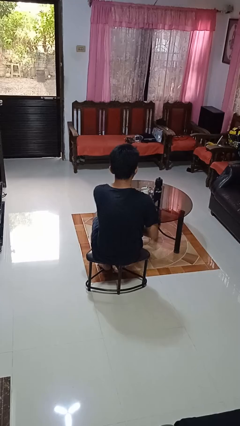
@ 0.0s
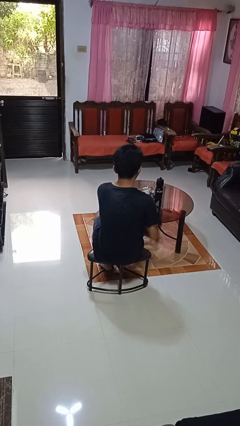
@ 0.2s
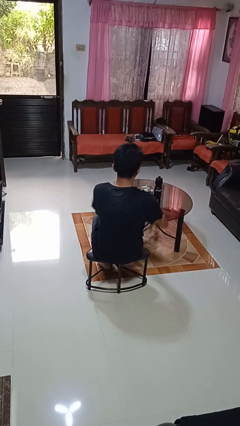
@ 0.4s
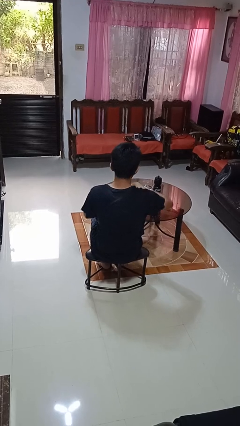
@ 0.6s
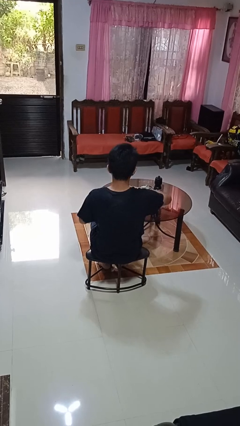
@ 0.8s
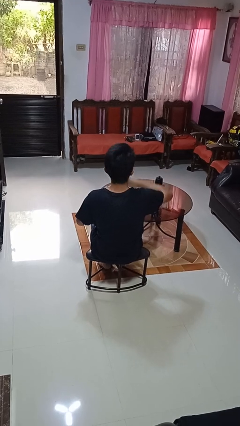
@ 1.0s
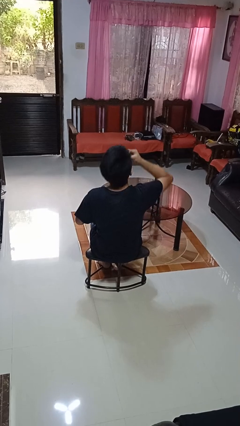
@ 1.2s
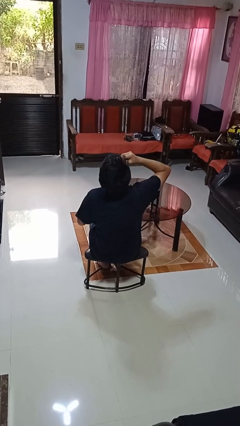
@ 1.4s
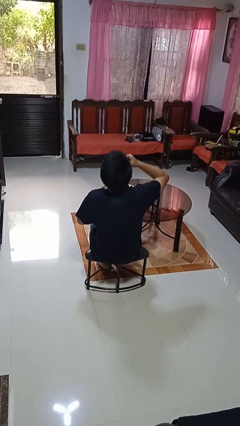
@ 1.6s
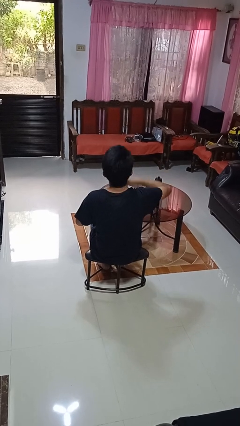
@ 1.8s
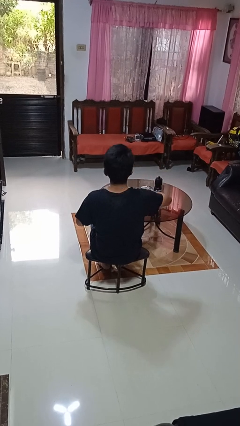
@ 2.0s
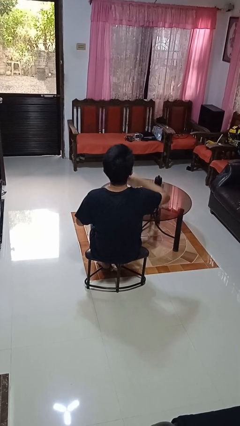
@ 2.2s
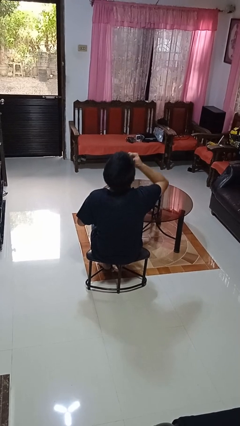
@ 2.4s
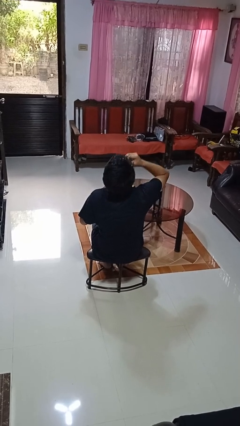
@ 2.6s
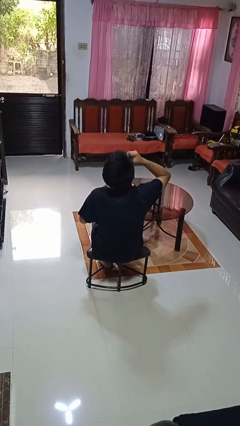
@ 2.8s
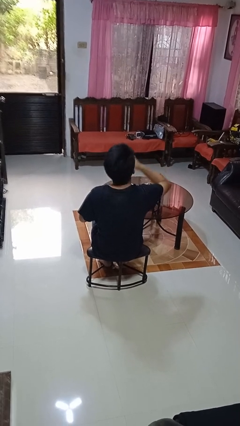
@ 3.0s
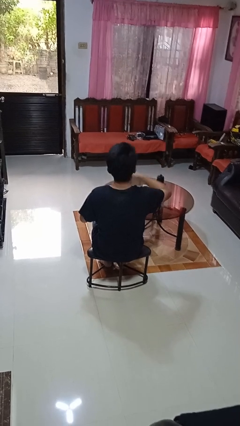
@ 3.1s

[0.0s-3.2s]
person eats with hands

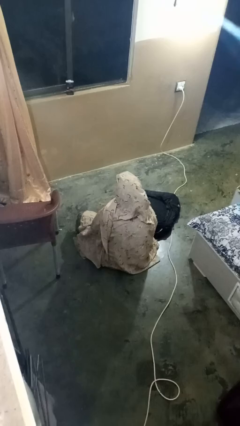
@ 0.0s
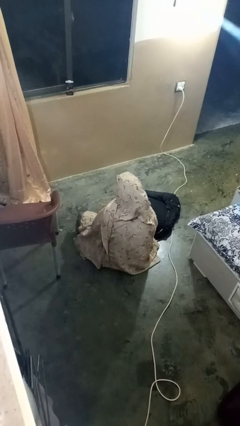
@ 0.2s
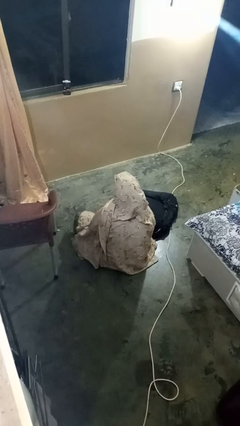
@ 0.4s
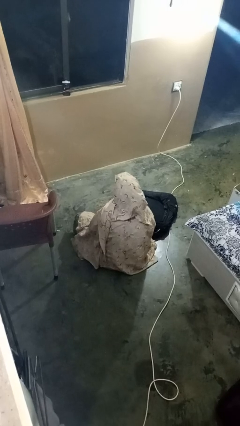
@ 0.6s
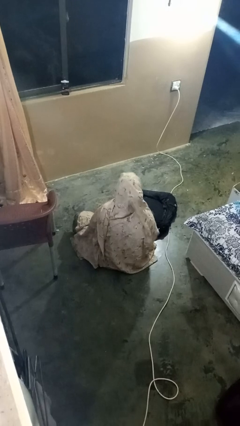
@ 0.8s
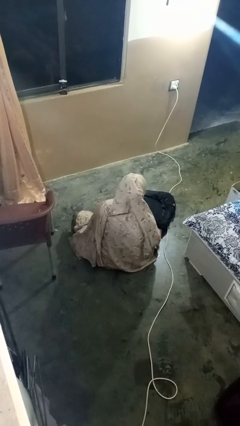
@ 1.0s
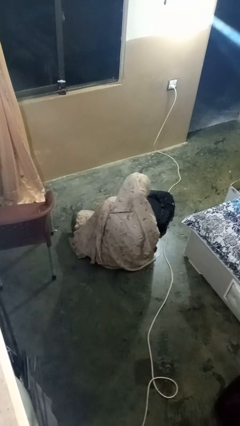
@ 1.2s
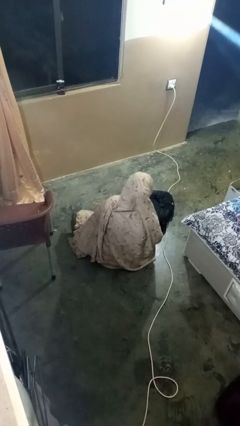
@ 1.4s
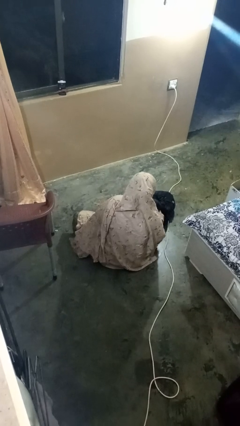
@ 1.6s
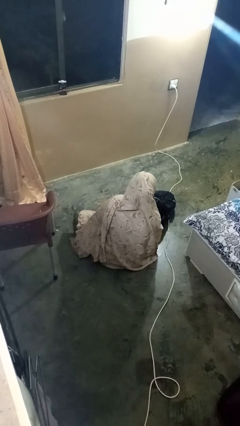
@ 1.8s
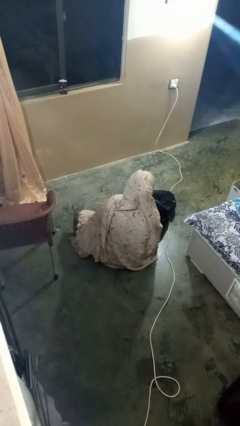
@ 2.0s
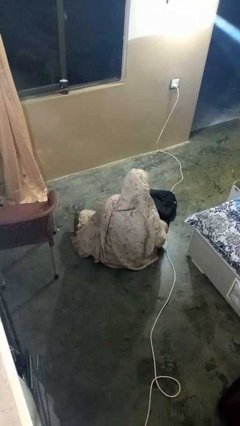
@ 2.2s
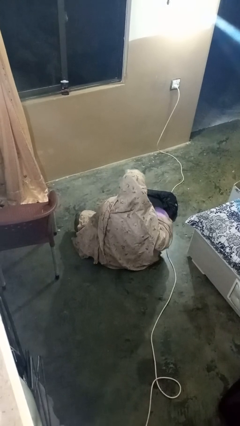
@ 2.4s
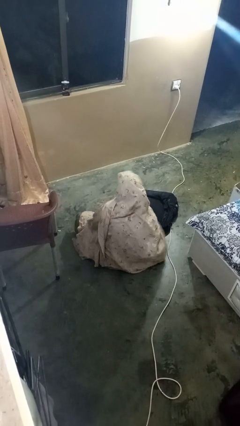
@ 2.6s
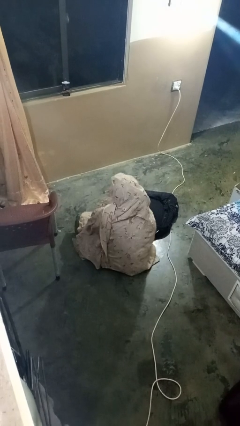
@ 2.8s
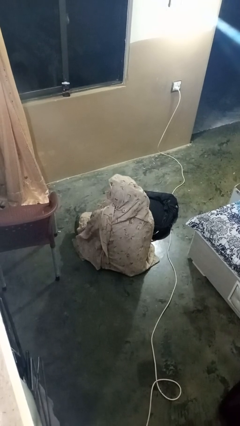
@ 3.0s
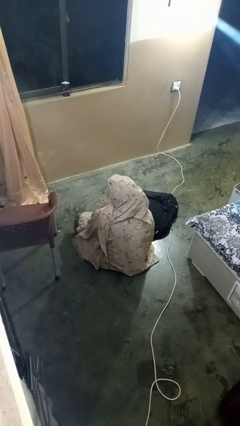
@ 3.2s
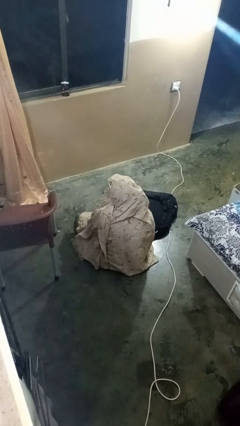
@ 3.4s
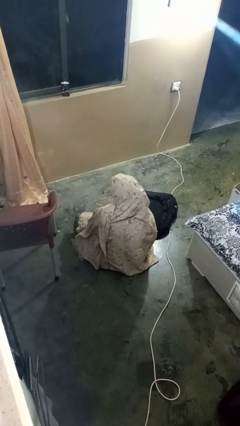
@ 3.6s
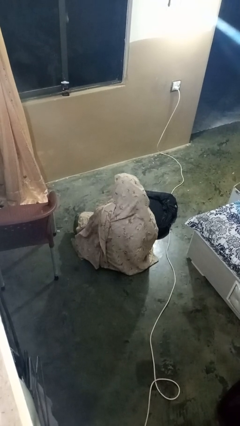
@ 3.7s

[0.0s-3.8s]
person eats snack from bag

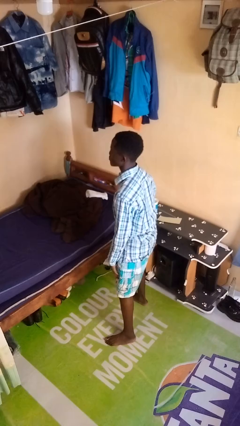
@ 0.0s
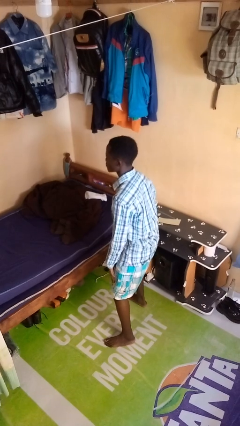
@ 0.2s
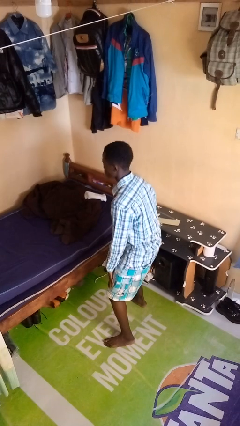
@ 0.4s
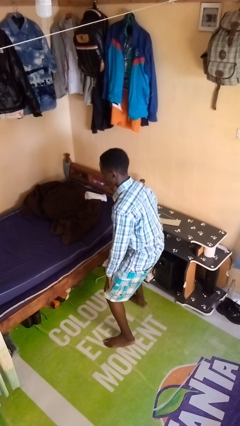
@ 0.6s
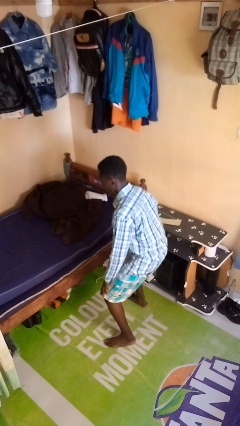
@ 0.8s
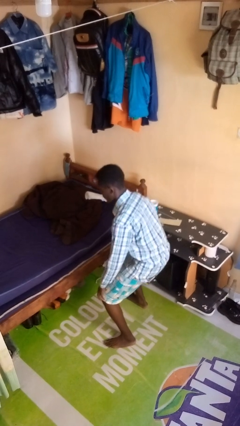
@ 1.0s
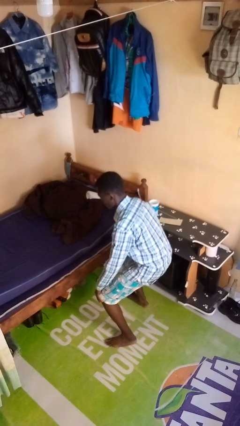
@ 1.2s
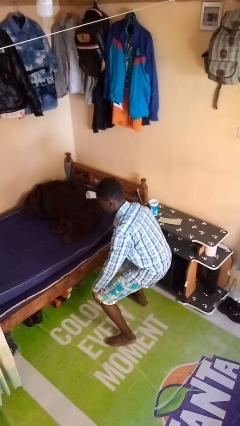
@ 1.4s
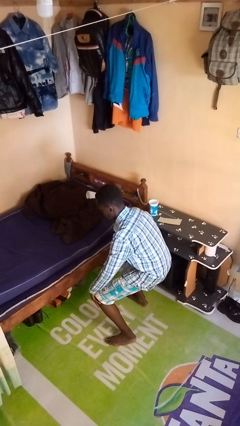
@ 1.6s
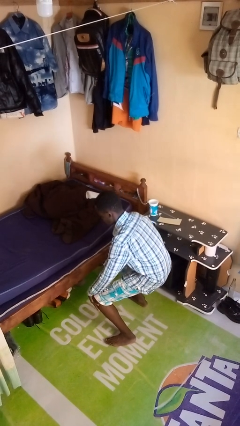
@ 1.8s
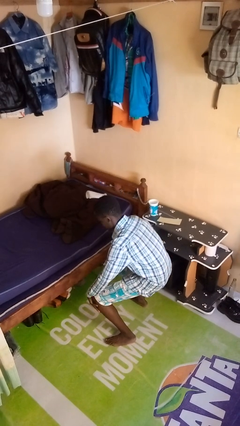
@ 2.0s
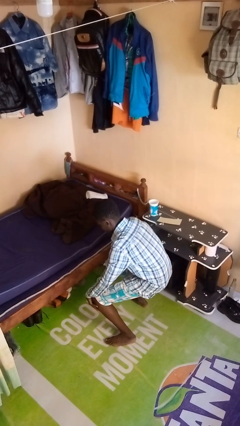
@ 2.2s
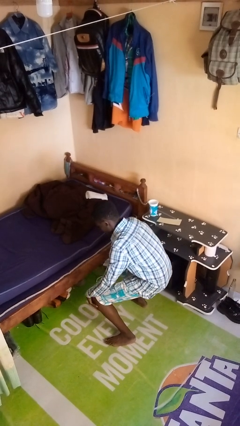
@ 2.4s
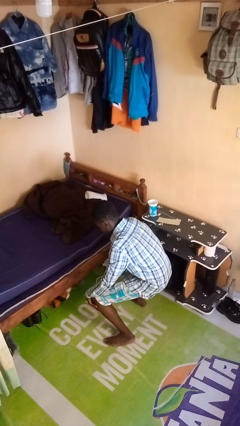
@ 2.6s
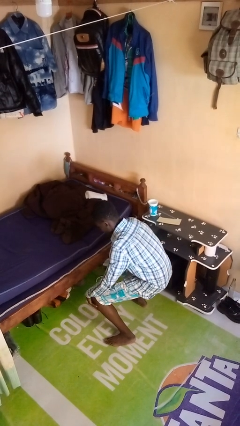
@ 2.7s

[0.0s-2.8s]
person squats

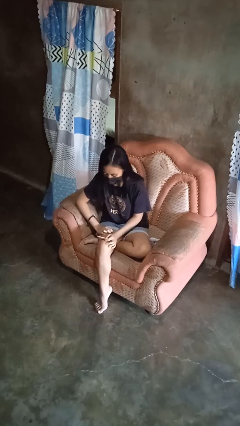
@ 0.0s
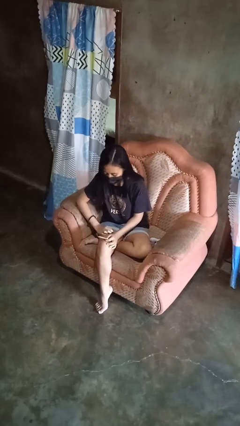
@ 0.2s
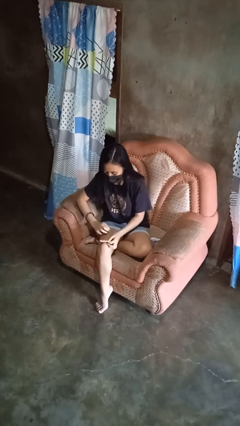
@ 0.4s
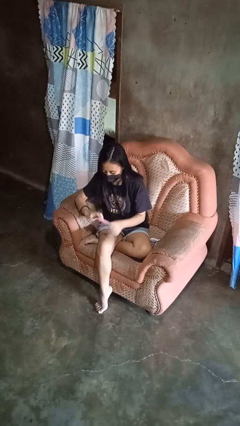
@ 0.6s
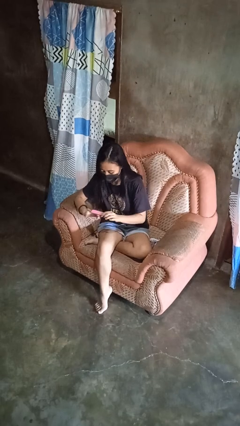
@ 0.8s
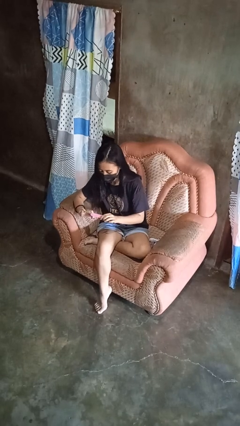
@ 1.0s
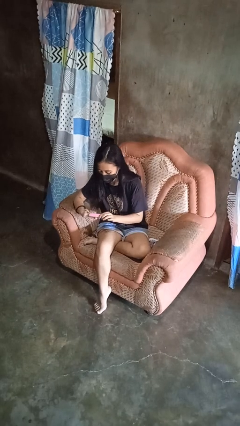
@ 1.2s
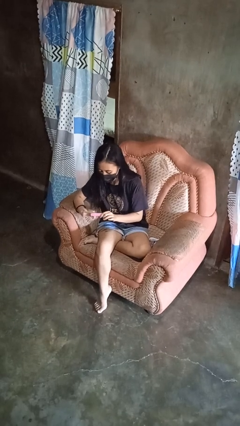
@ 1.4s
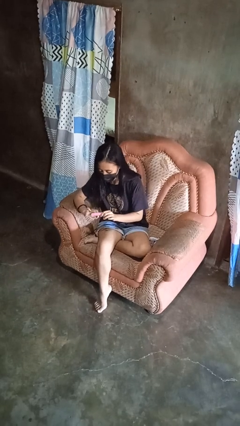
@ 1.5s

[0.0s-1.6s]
person files fingernails

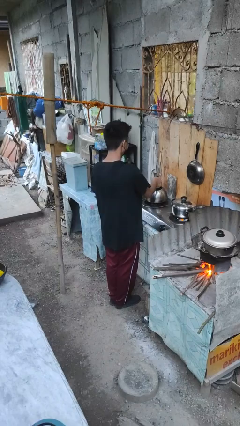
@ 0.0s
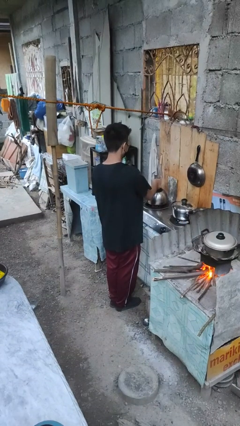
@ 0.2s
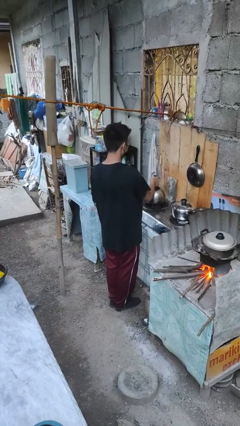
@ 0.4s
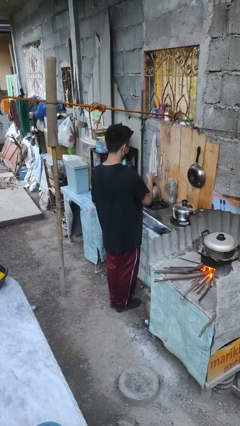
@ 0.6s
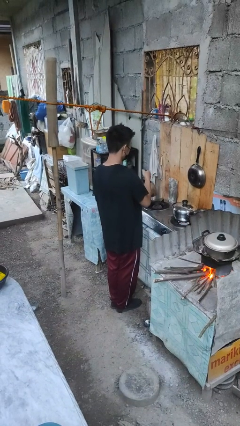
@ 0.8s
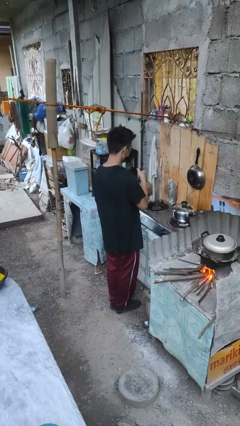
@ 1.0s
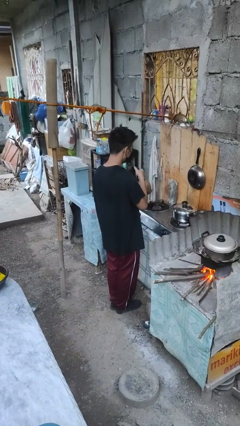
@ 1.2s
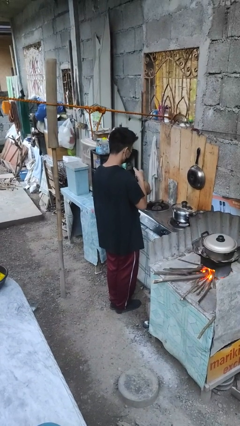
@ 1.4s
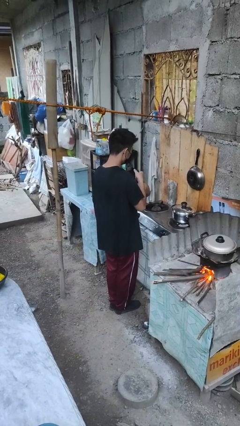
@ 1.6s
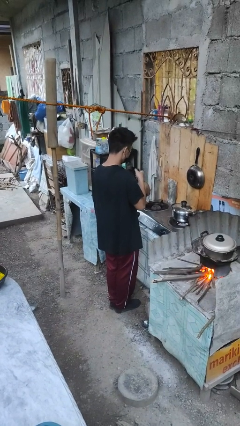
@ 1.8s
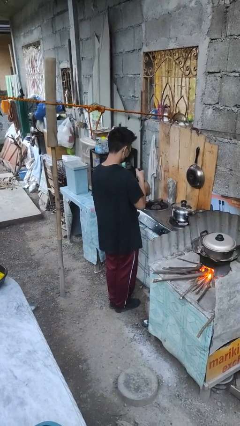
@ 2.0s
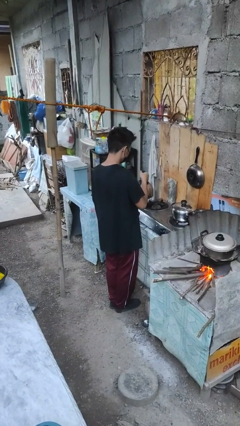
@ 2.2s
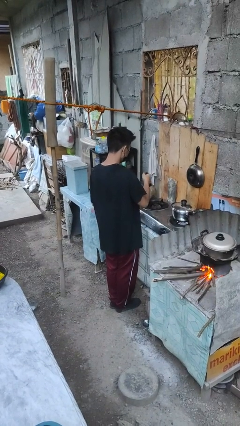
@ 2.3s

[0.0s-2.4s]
person picks up object from countertop

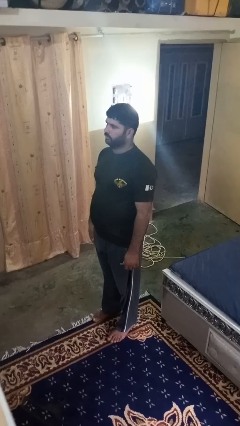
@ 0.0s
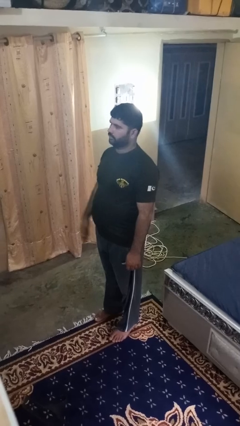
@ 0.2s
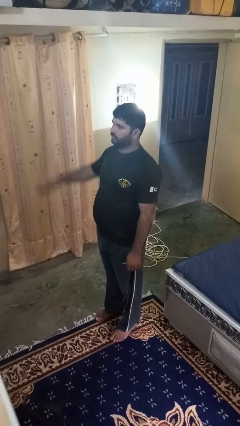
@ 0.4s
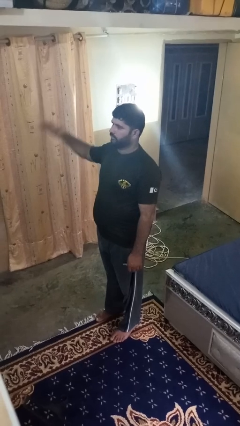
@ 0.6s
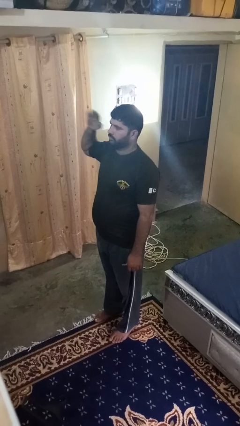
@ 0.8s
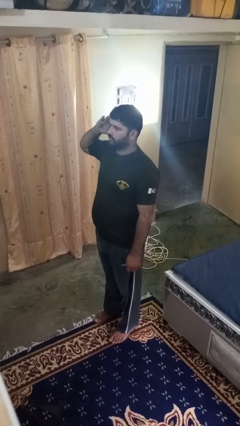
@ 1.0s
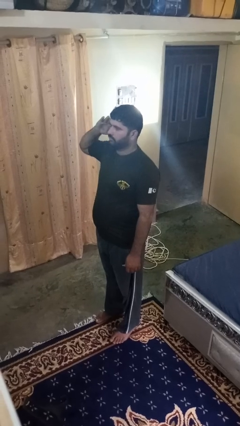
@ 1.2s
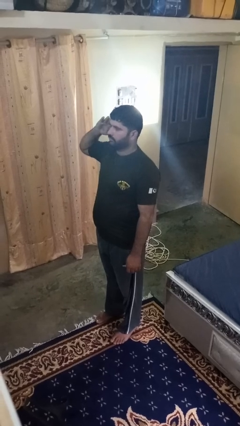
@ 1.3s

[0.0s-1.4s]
person salutes

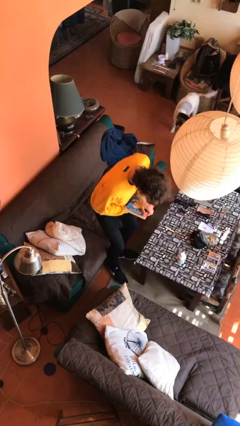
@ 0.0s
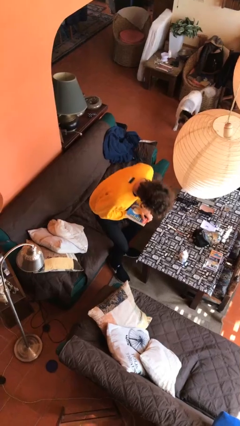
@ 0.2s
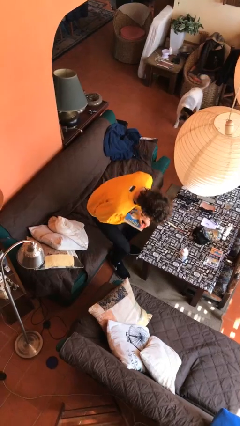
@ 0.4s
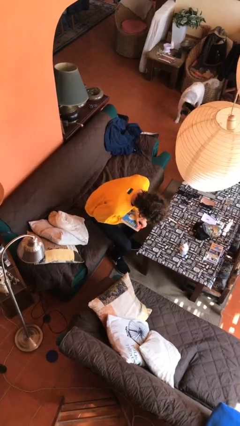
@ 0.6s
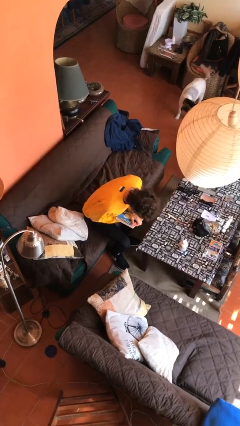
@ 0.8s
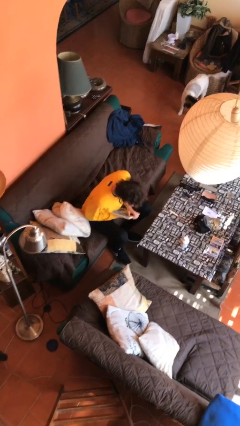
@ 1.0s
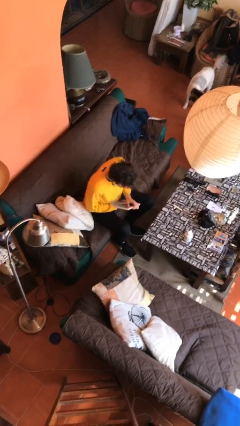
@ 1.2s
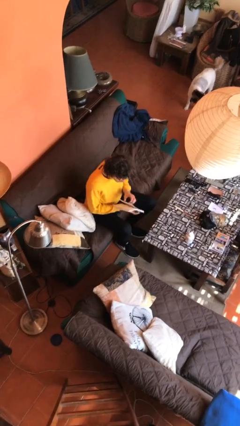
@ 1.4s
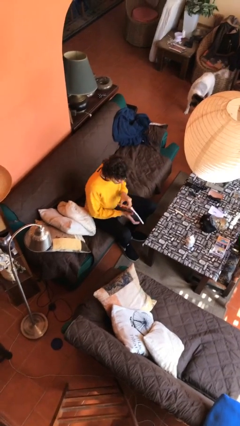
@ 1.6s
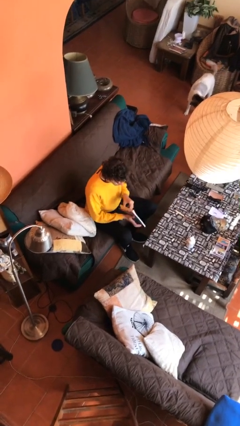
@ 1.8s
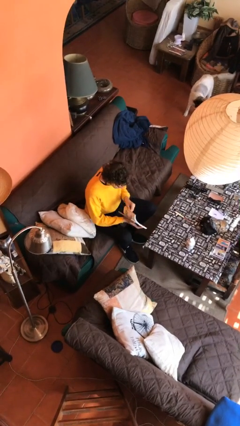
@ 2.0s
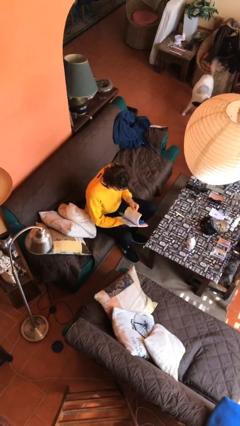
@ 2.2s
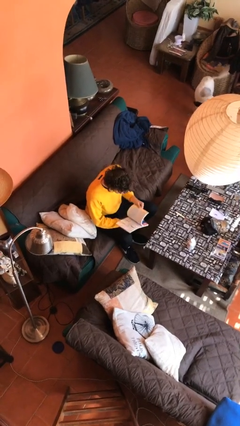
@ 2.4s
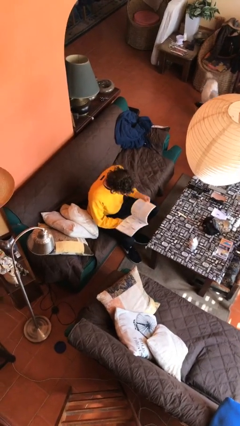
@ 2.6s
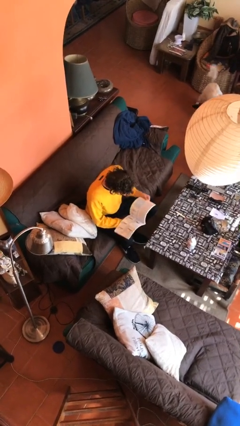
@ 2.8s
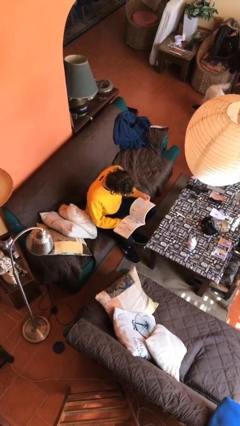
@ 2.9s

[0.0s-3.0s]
person sits down
